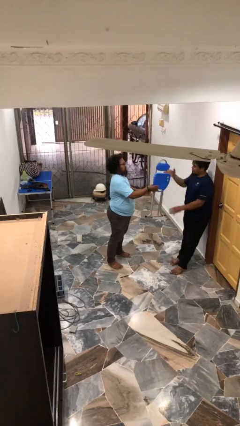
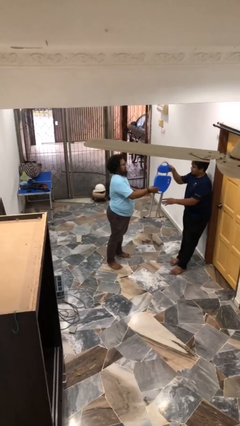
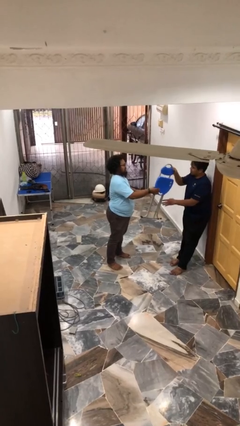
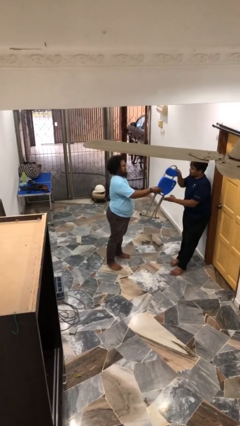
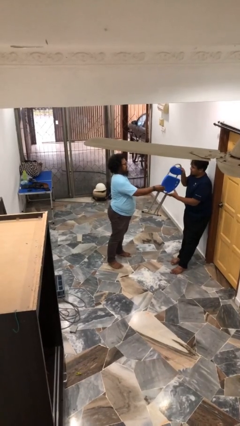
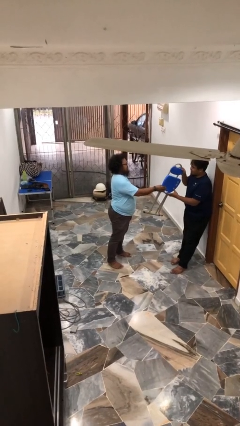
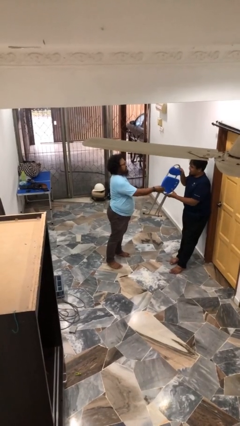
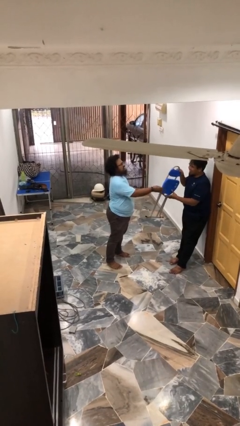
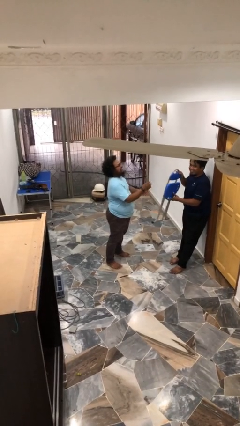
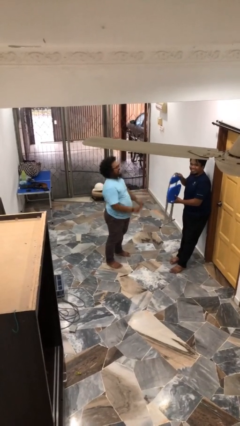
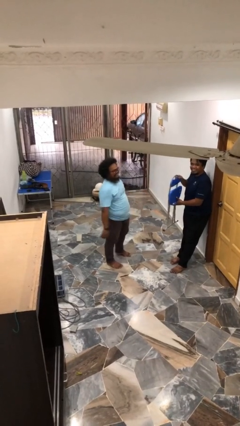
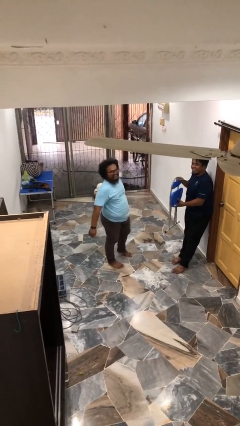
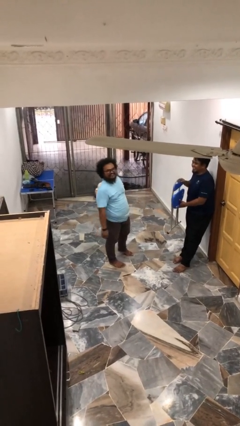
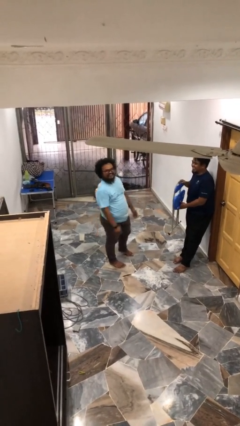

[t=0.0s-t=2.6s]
person transfers object to person

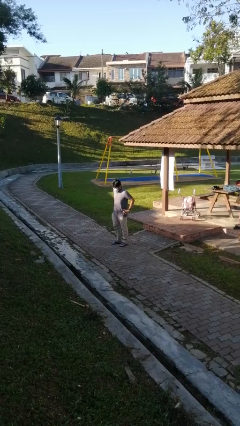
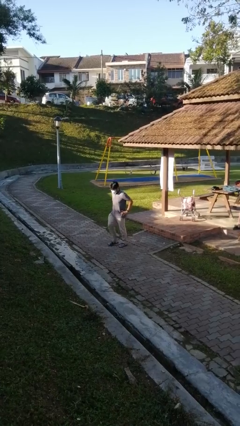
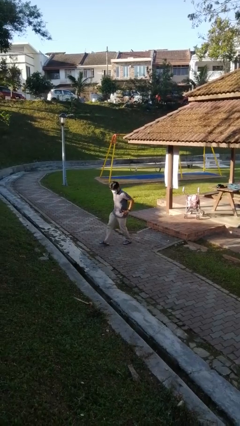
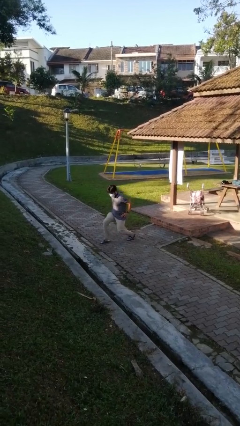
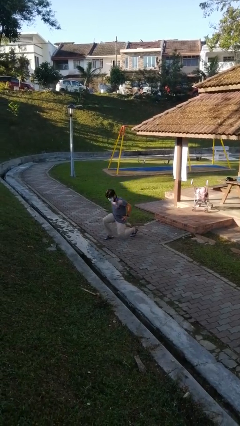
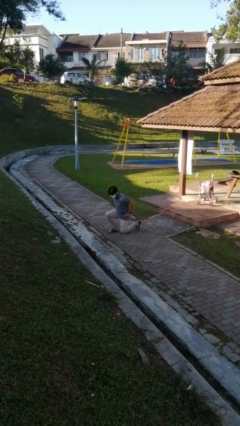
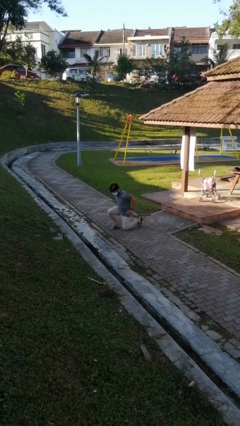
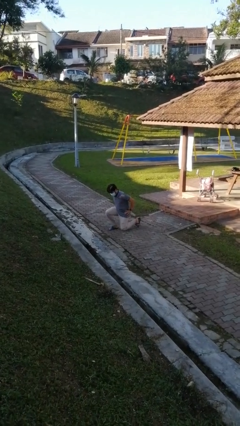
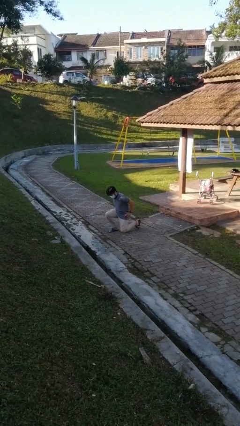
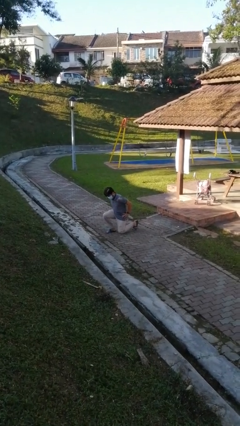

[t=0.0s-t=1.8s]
person kneels

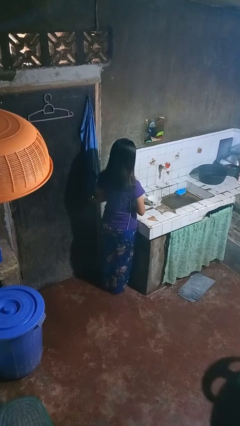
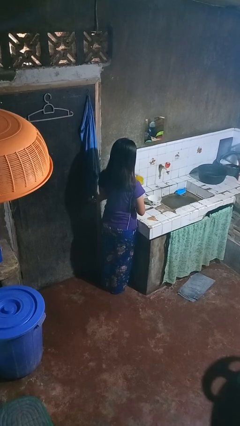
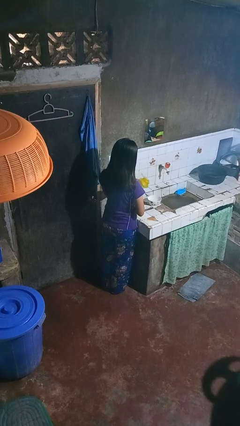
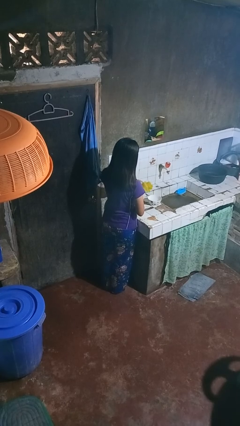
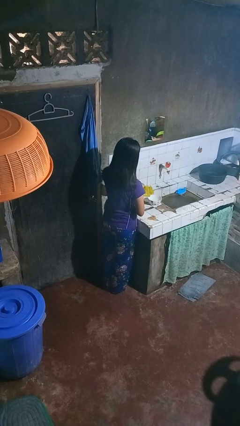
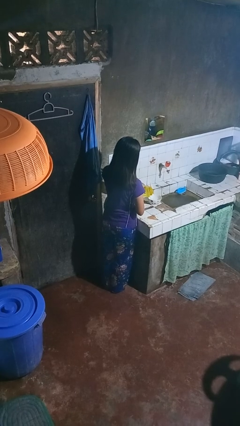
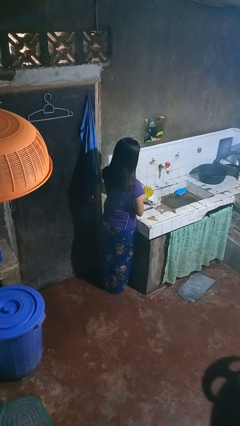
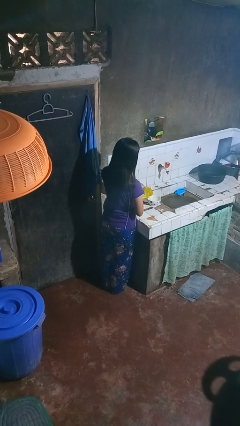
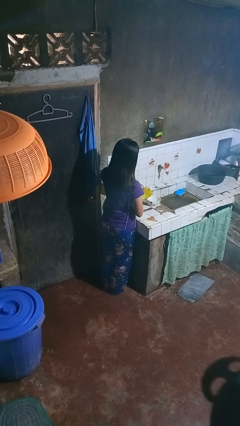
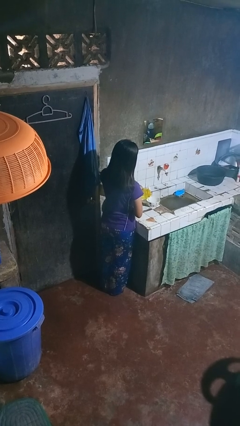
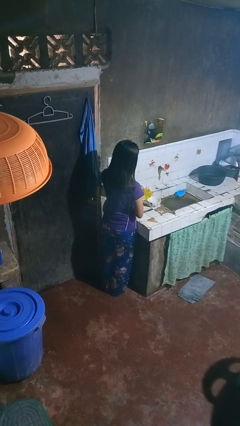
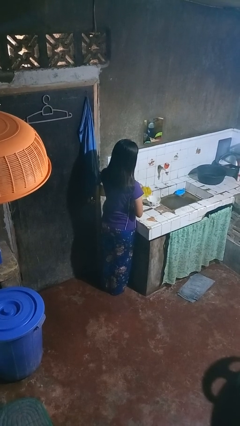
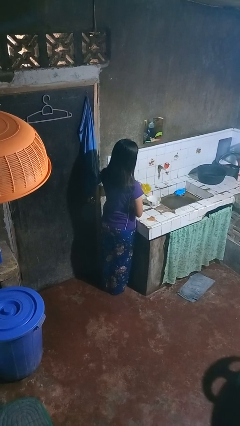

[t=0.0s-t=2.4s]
person pours into bowl

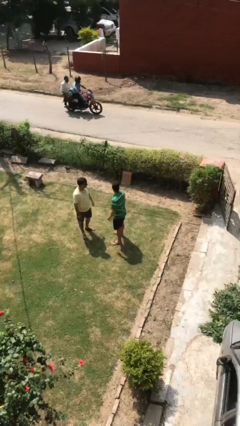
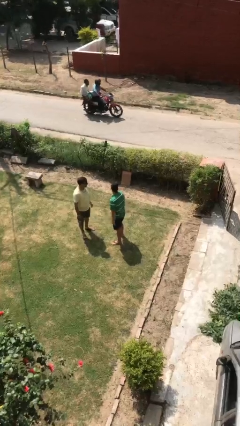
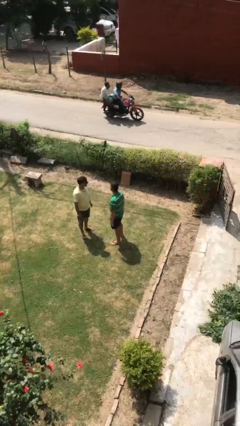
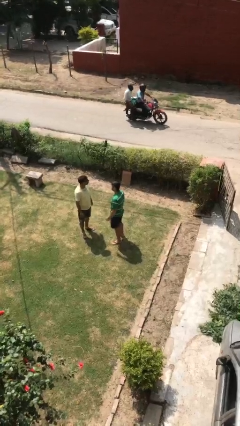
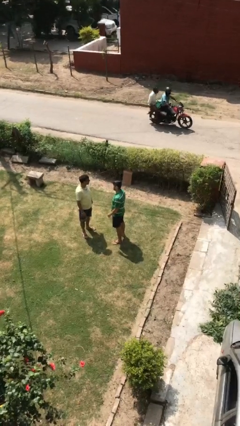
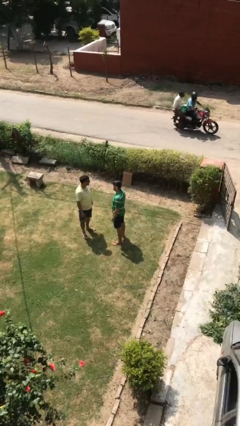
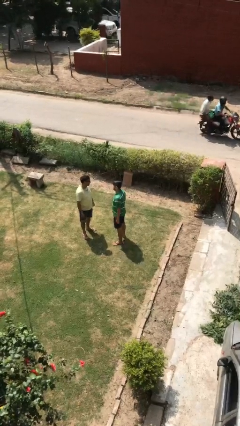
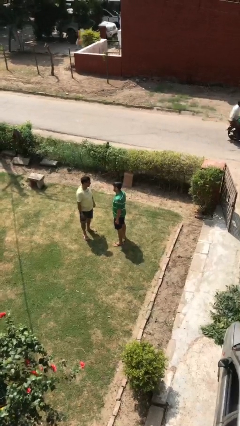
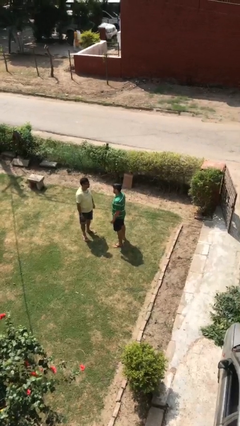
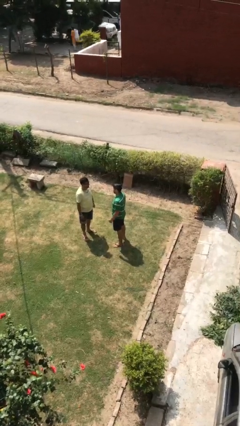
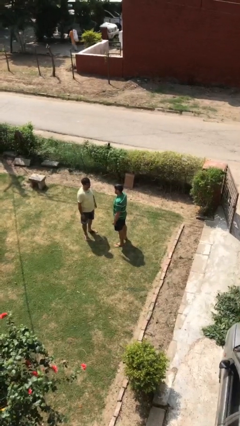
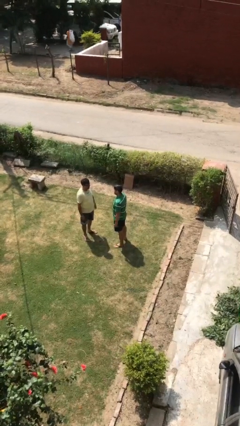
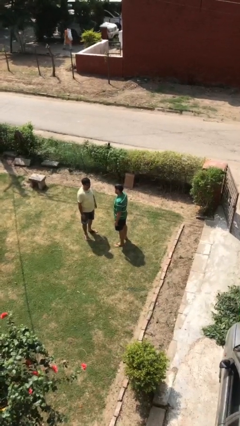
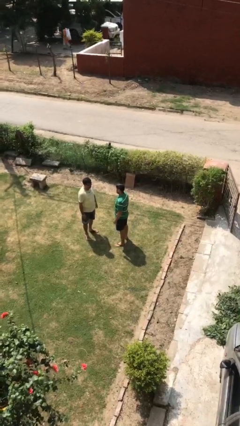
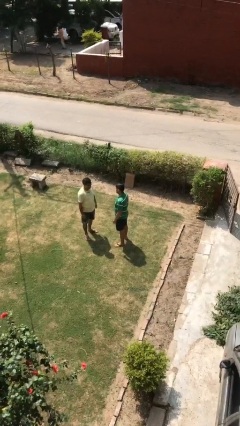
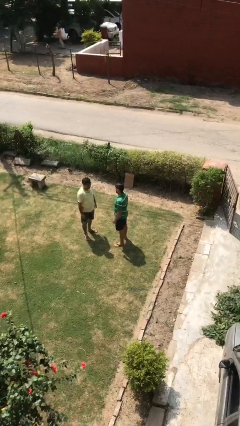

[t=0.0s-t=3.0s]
person talks to person

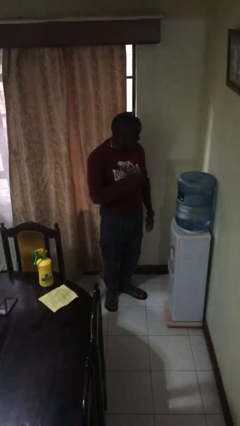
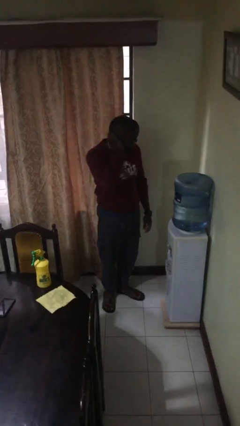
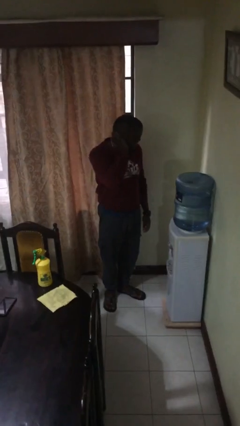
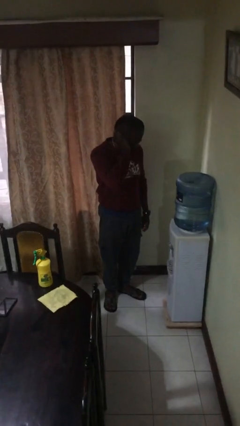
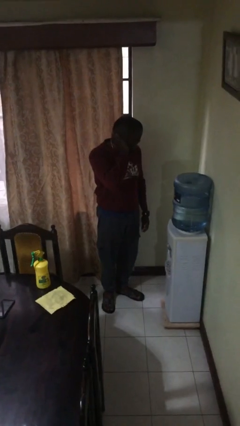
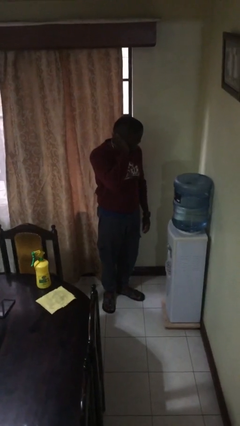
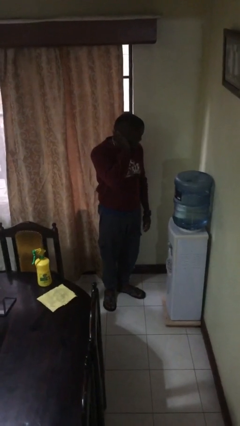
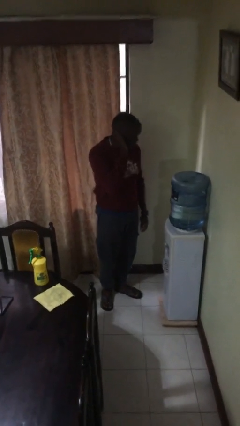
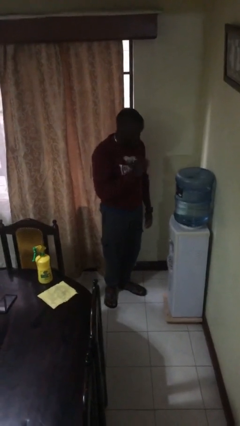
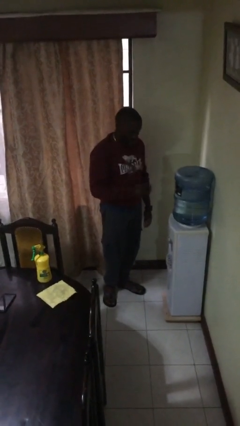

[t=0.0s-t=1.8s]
person swats bug

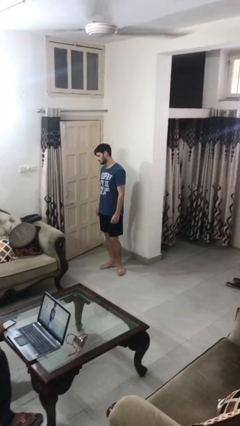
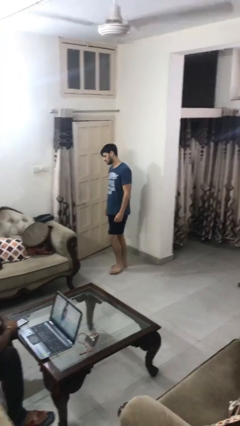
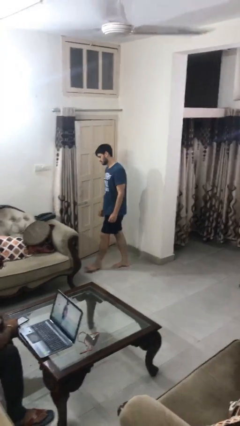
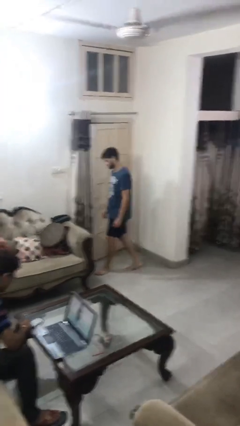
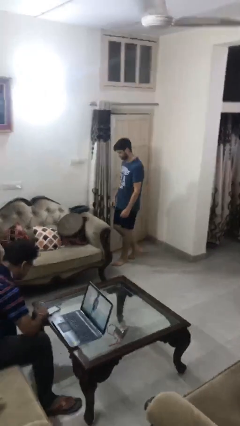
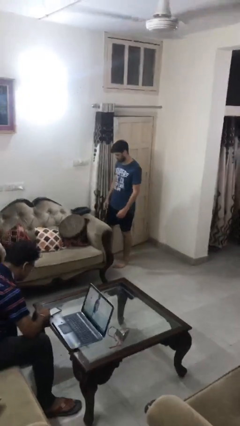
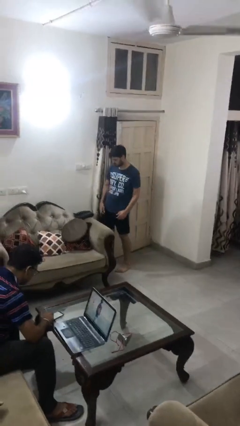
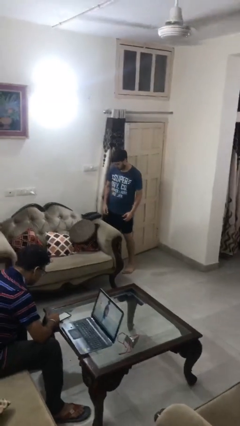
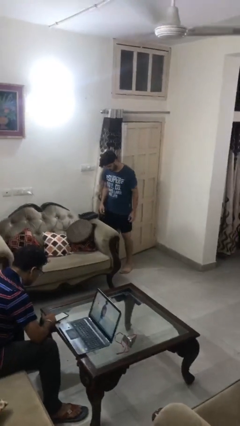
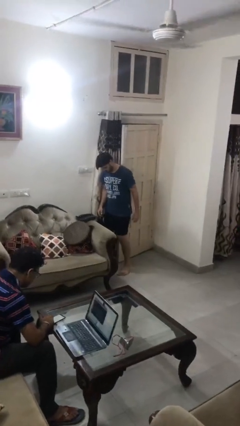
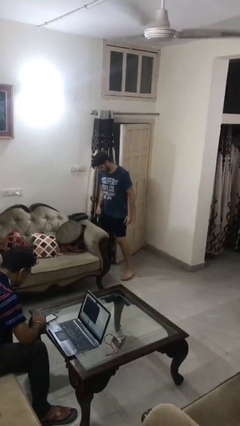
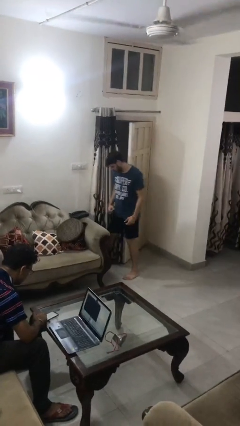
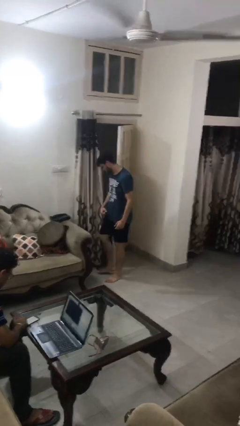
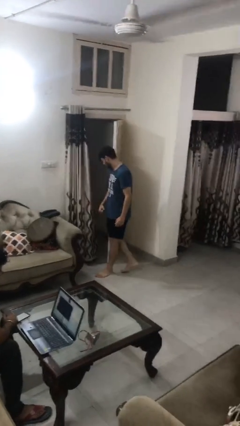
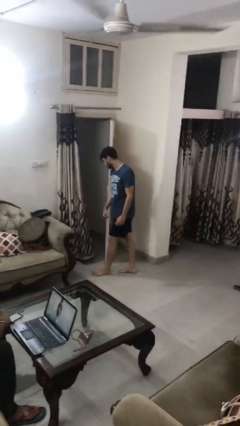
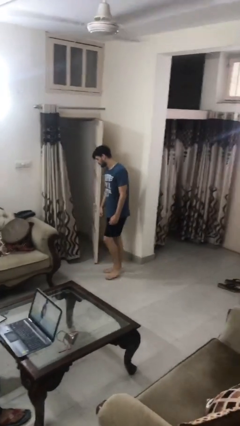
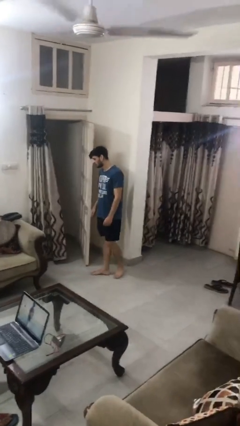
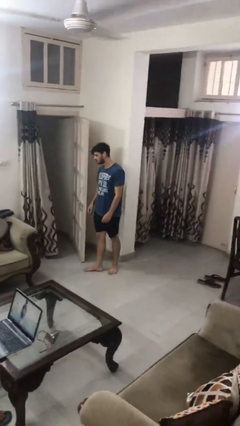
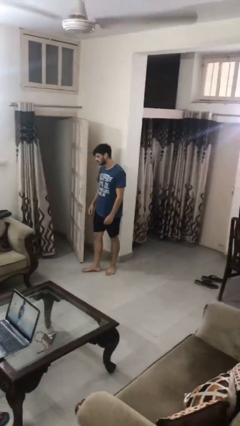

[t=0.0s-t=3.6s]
person opens facility door

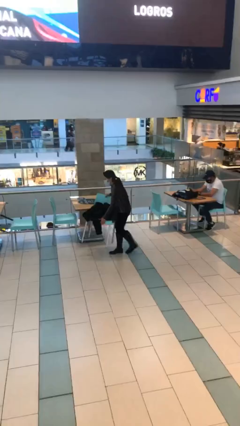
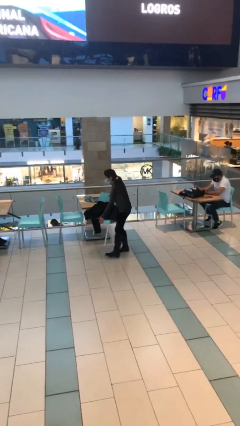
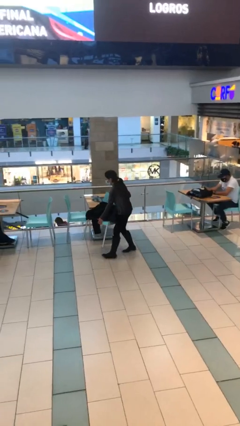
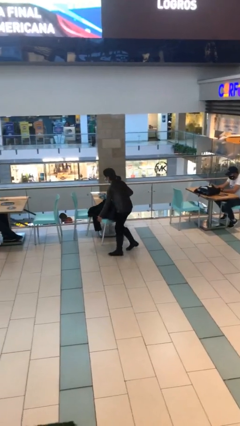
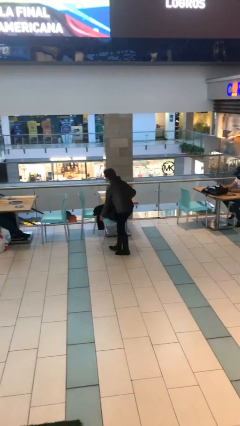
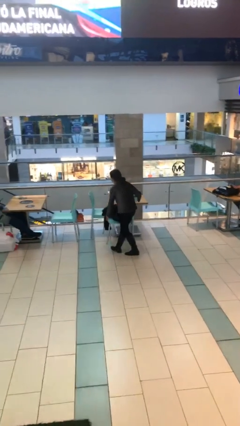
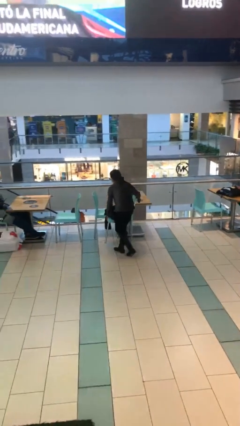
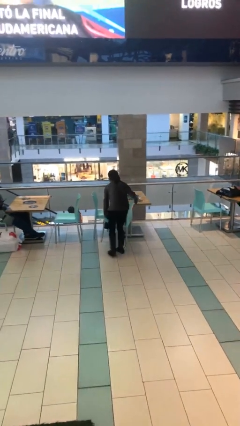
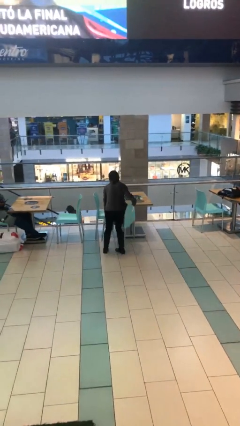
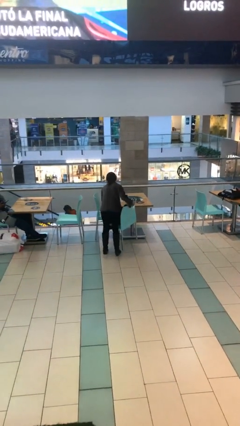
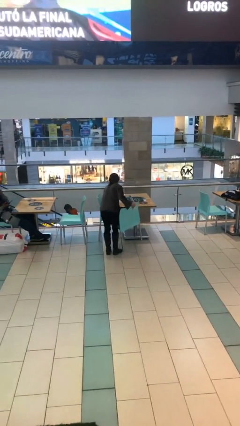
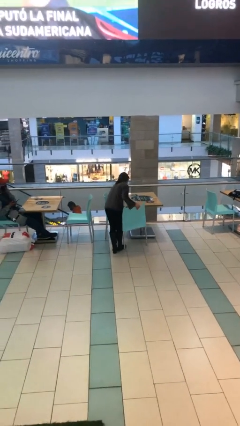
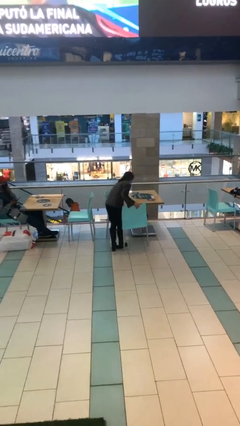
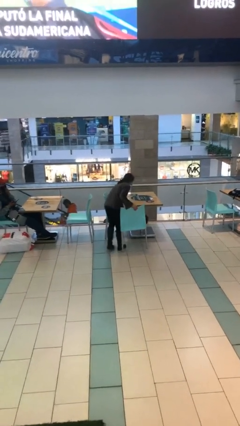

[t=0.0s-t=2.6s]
person carries heavy object
